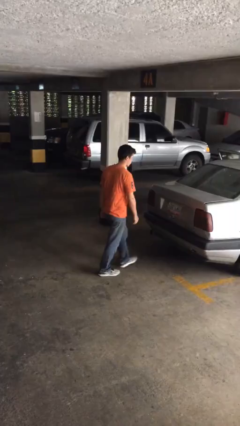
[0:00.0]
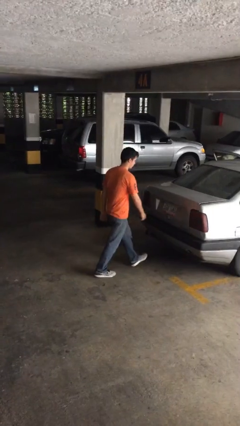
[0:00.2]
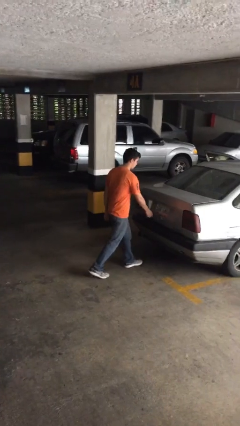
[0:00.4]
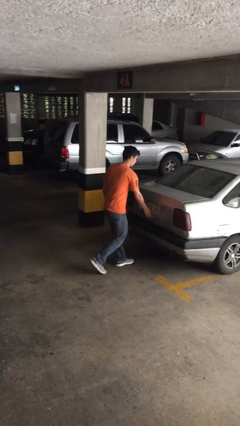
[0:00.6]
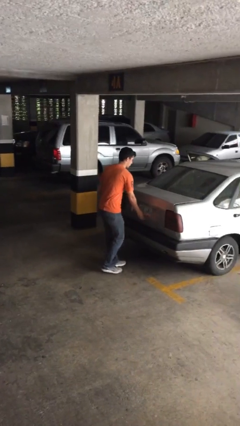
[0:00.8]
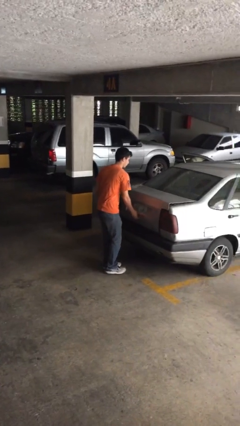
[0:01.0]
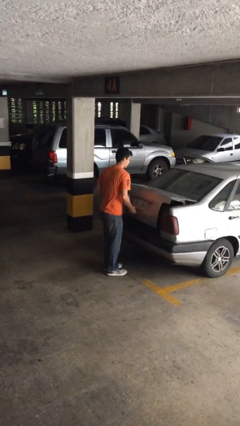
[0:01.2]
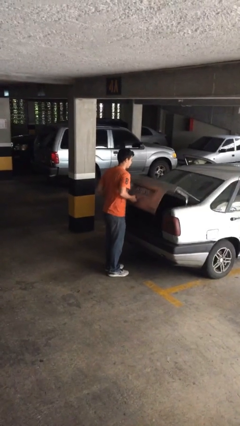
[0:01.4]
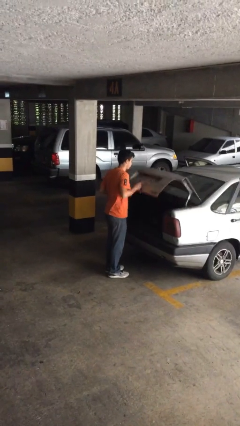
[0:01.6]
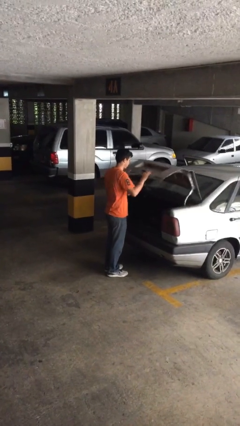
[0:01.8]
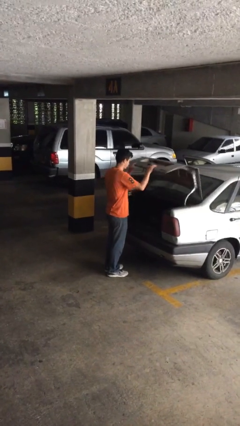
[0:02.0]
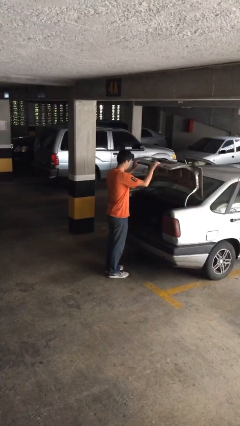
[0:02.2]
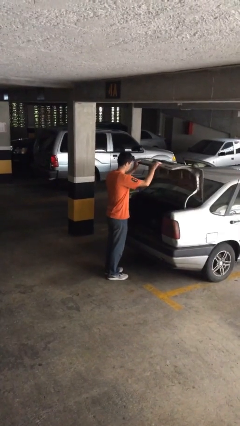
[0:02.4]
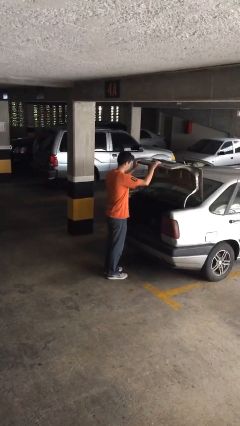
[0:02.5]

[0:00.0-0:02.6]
person opens car trunk

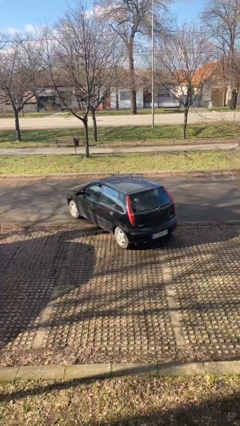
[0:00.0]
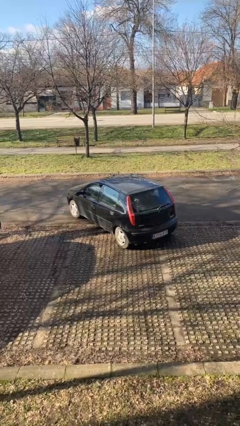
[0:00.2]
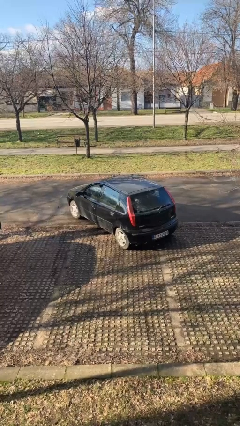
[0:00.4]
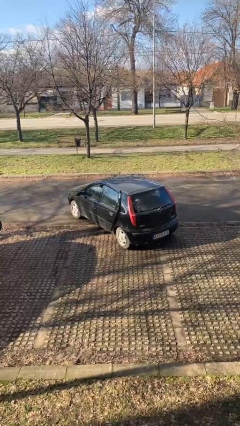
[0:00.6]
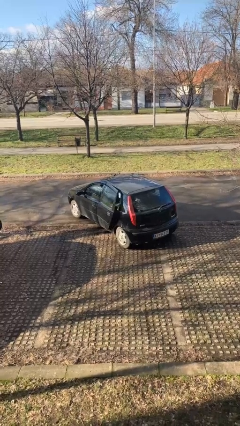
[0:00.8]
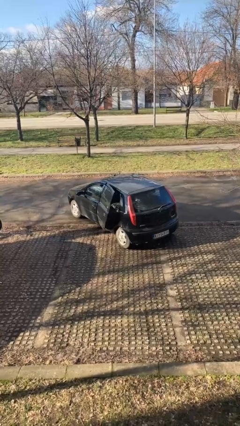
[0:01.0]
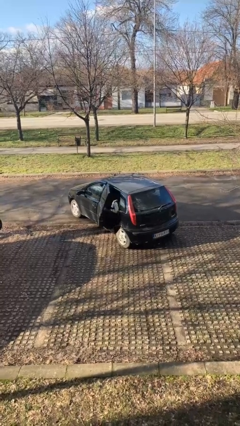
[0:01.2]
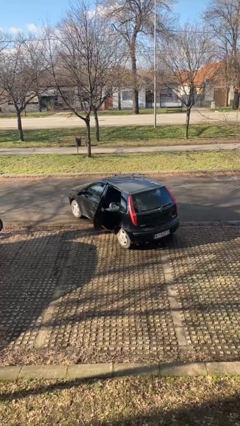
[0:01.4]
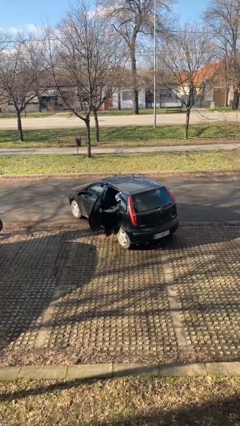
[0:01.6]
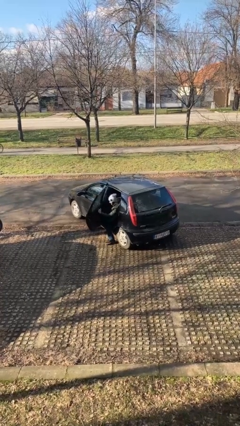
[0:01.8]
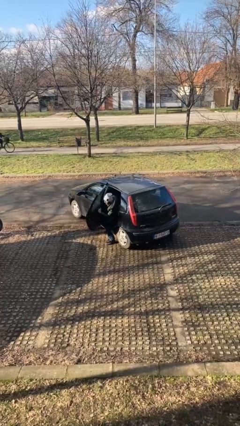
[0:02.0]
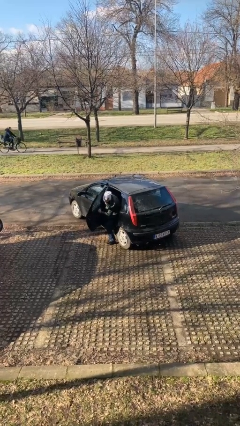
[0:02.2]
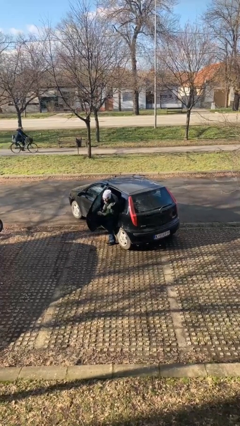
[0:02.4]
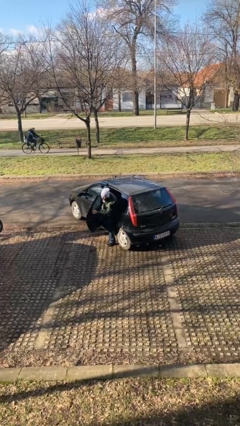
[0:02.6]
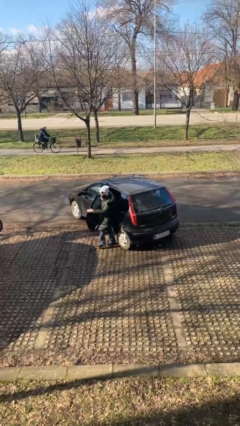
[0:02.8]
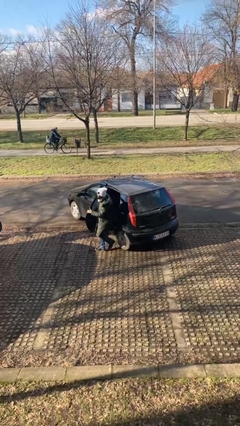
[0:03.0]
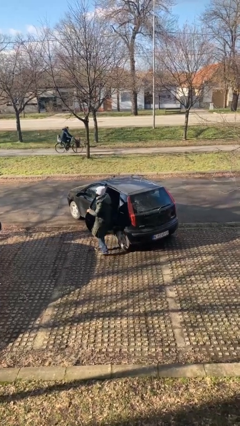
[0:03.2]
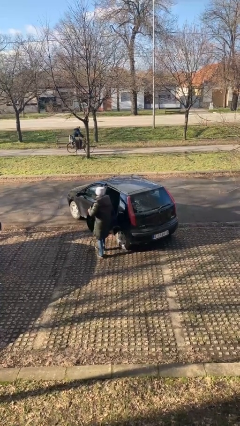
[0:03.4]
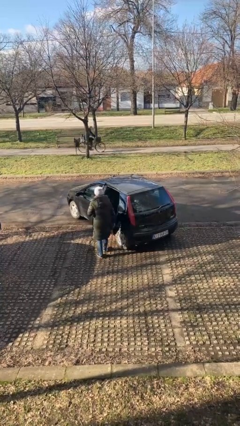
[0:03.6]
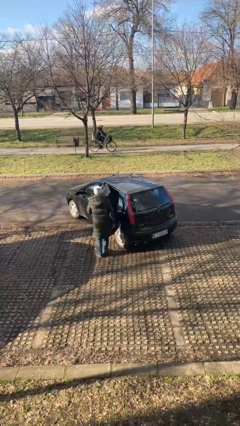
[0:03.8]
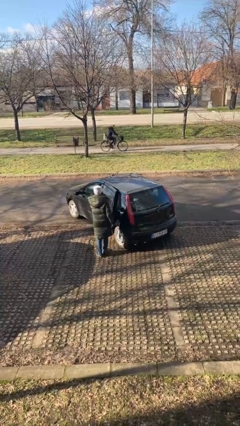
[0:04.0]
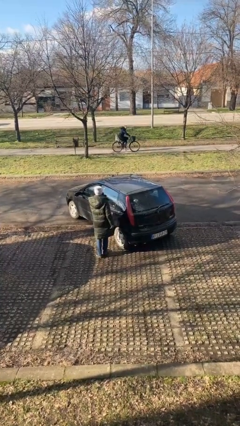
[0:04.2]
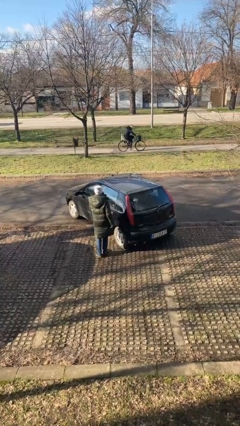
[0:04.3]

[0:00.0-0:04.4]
car drops off person

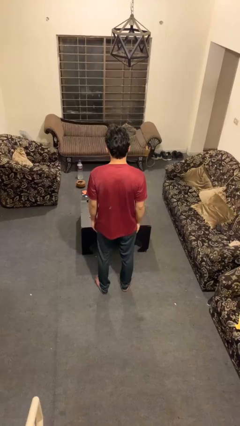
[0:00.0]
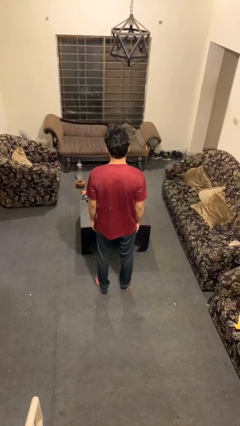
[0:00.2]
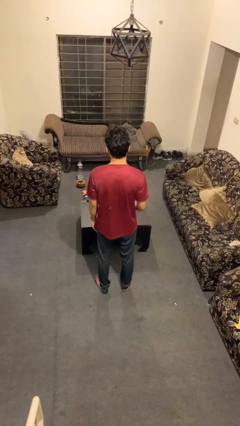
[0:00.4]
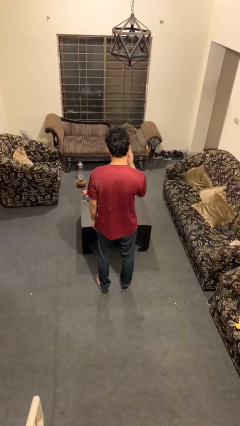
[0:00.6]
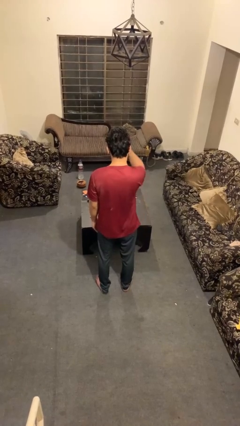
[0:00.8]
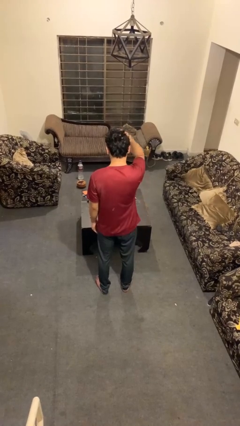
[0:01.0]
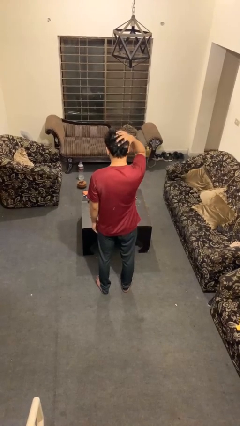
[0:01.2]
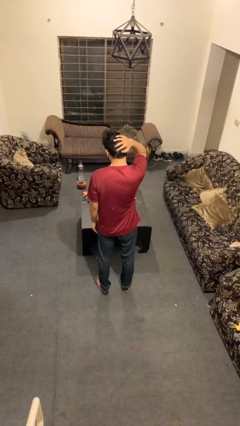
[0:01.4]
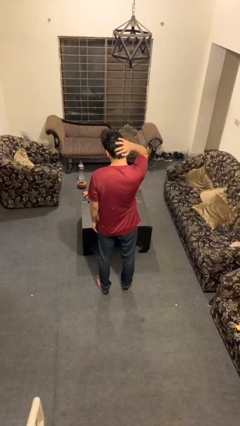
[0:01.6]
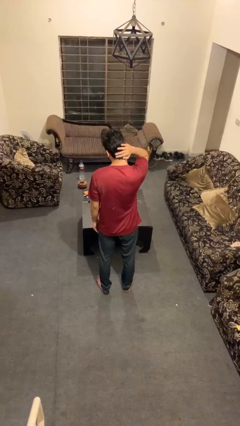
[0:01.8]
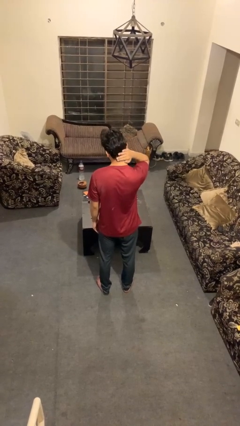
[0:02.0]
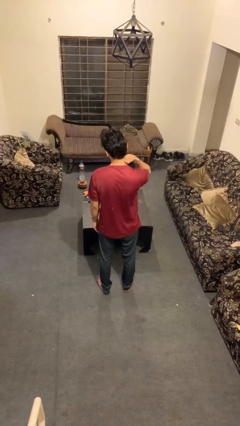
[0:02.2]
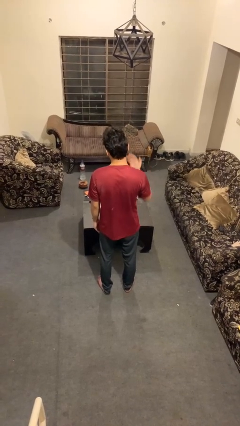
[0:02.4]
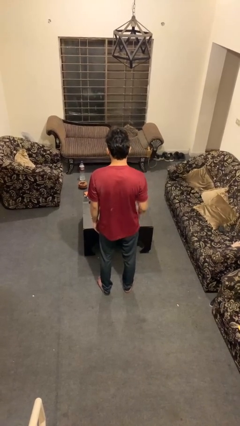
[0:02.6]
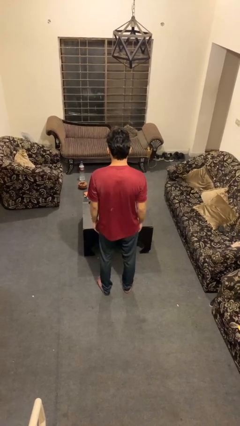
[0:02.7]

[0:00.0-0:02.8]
person strokes hair

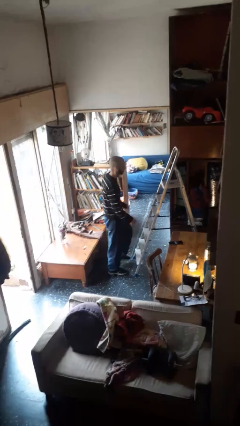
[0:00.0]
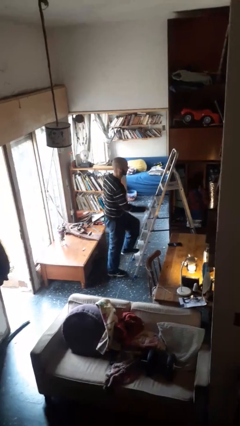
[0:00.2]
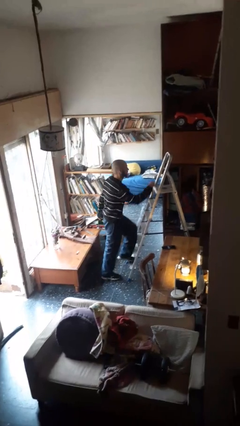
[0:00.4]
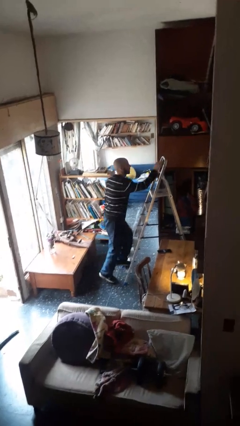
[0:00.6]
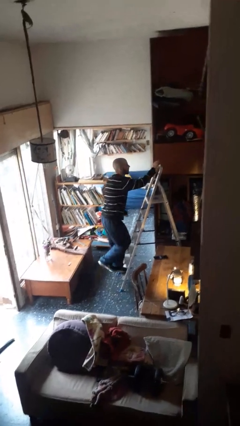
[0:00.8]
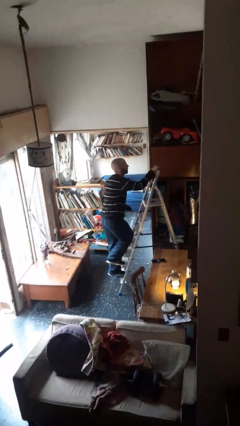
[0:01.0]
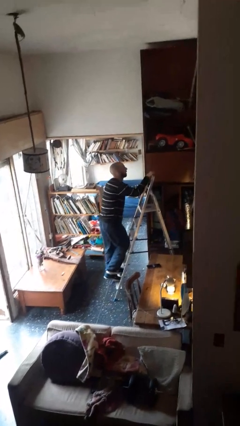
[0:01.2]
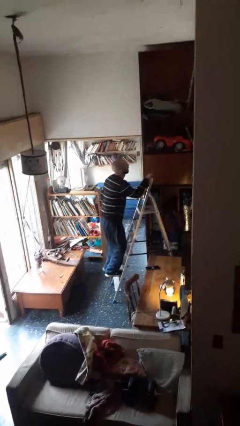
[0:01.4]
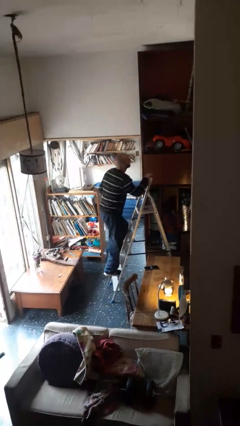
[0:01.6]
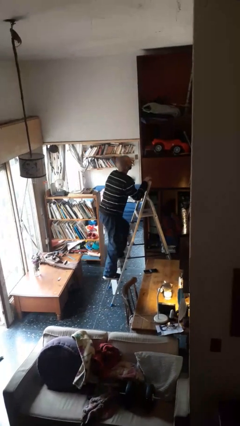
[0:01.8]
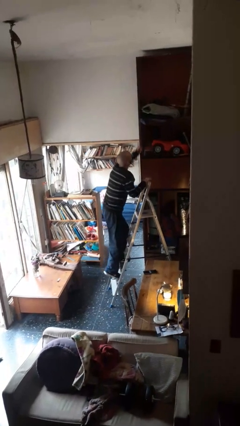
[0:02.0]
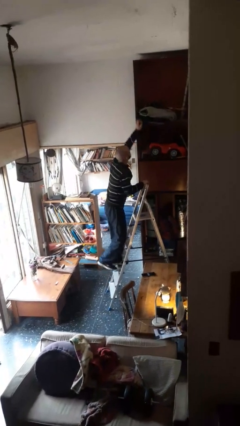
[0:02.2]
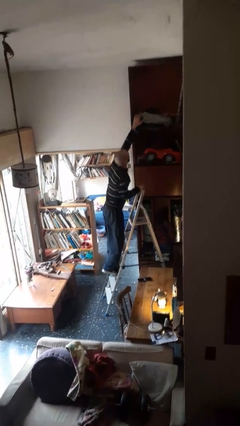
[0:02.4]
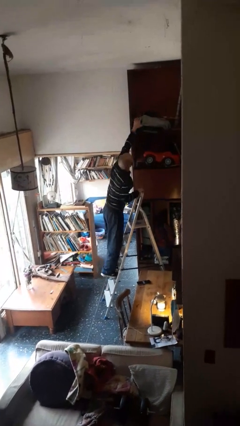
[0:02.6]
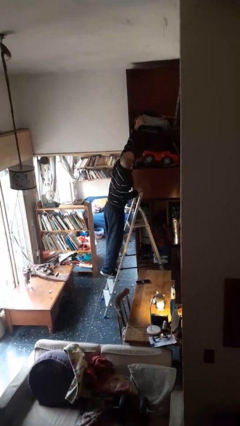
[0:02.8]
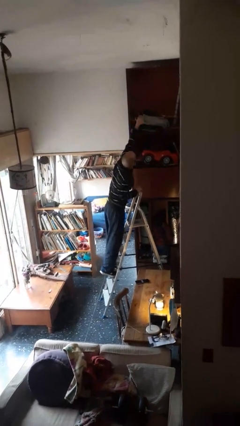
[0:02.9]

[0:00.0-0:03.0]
person climbs up ladder

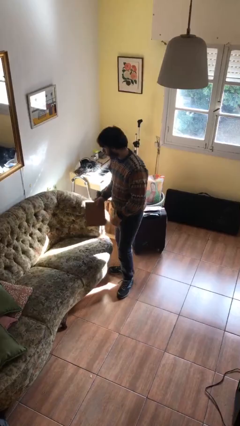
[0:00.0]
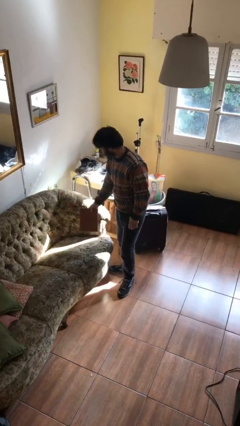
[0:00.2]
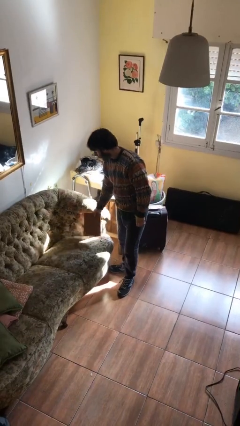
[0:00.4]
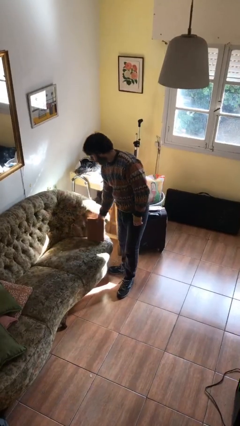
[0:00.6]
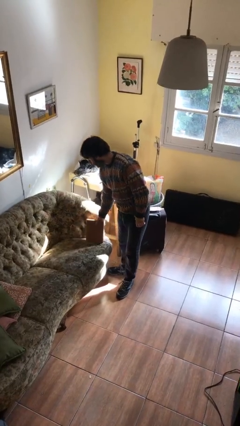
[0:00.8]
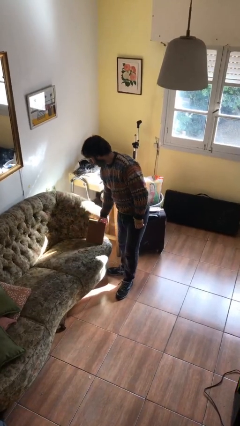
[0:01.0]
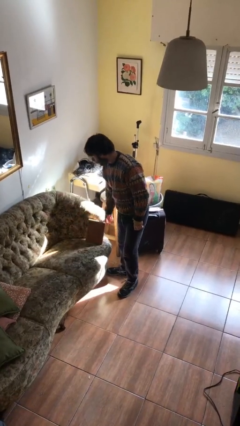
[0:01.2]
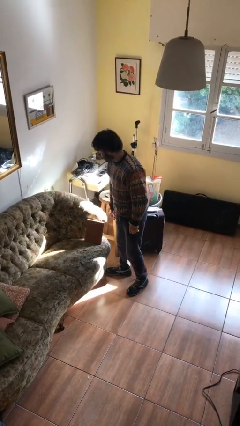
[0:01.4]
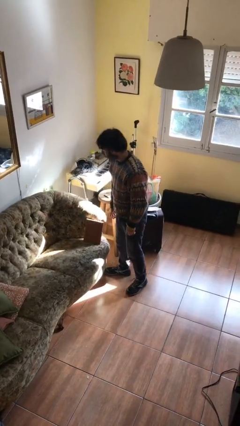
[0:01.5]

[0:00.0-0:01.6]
person puts down object on couch

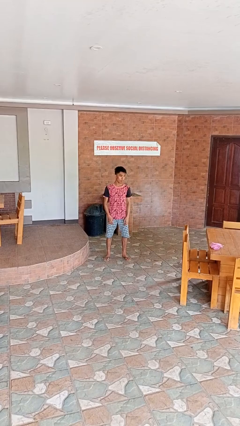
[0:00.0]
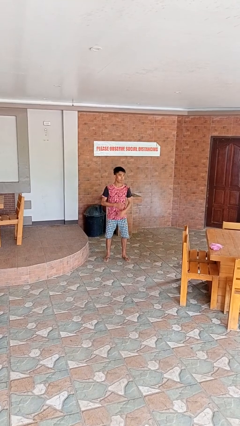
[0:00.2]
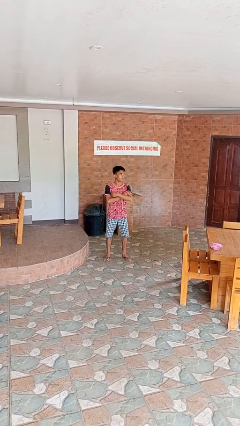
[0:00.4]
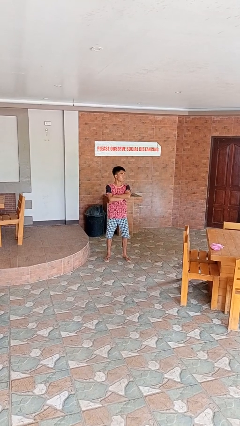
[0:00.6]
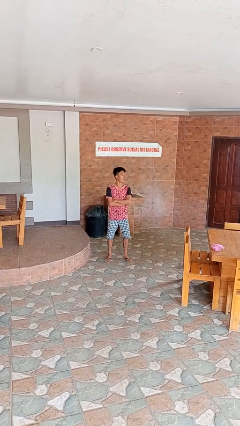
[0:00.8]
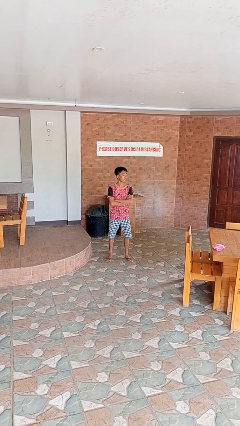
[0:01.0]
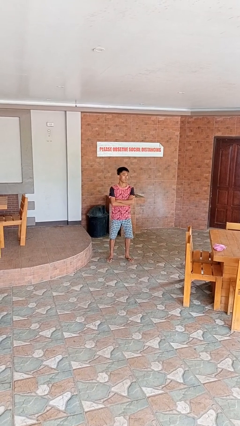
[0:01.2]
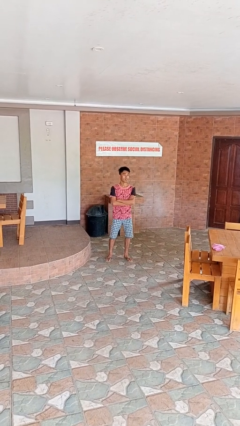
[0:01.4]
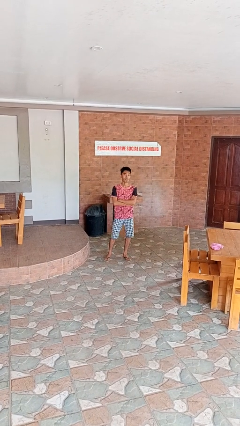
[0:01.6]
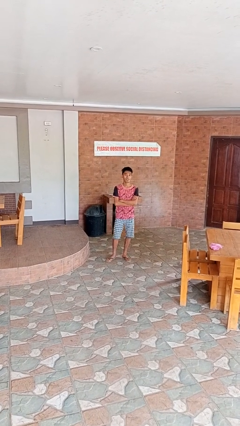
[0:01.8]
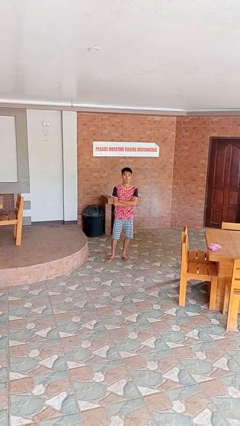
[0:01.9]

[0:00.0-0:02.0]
person crosses arms

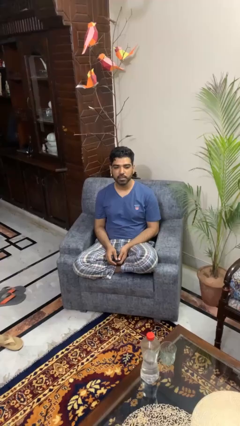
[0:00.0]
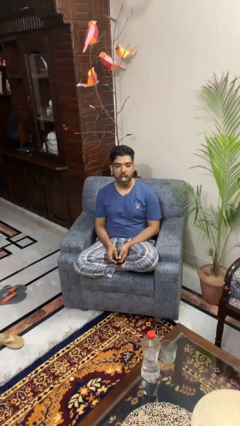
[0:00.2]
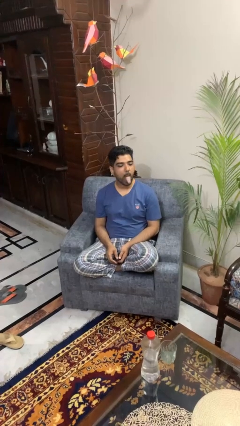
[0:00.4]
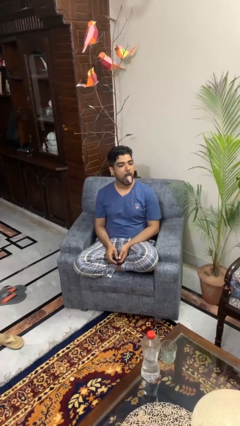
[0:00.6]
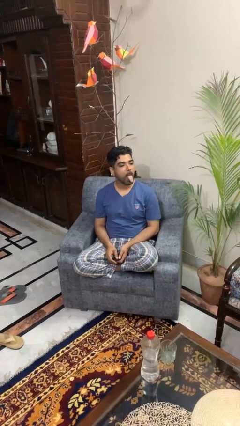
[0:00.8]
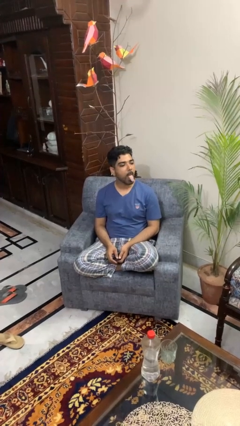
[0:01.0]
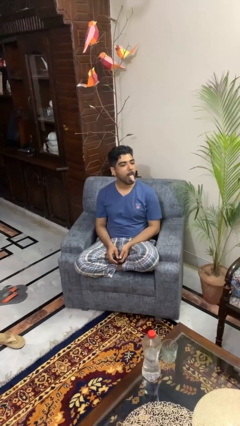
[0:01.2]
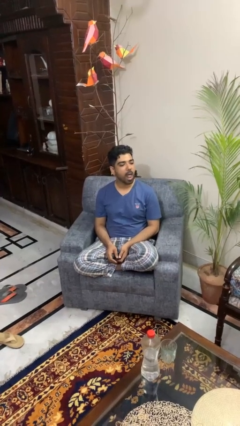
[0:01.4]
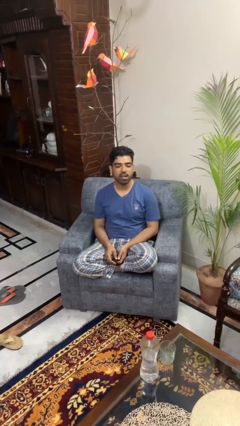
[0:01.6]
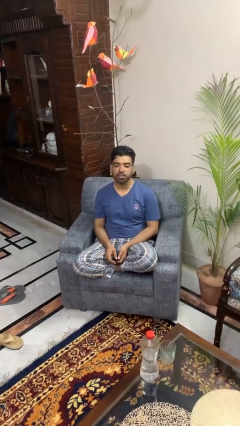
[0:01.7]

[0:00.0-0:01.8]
person sticks out tongue
